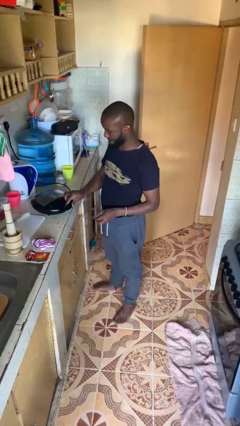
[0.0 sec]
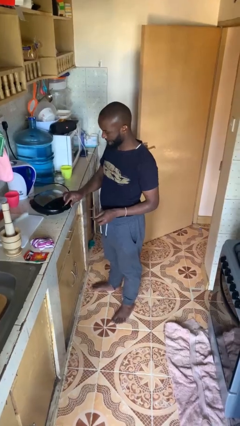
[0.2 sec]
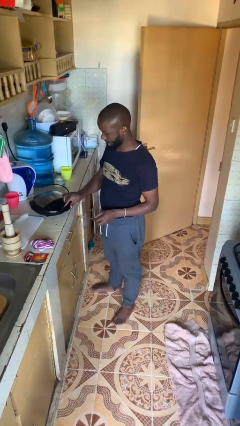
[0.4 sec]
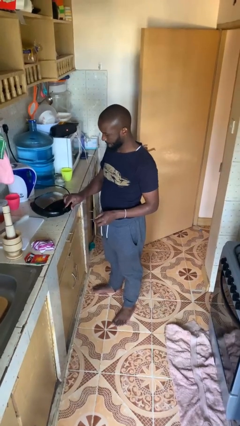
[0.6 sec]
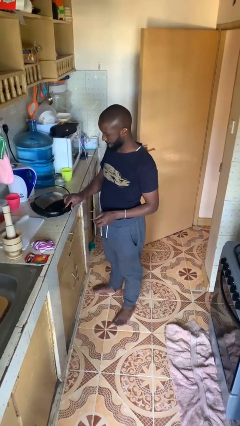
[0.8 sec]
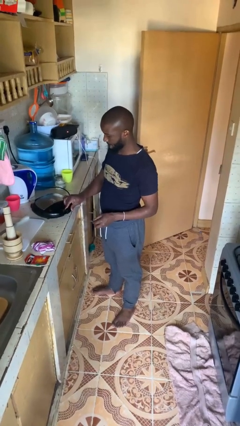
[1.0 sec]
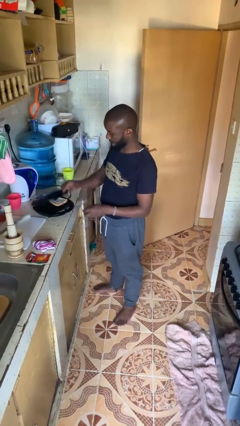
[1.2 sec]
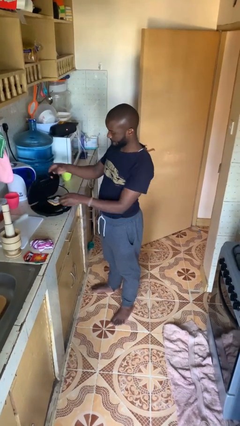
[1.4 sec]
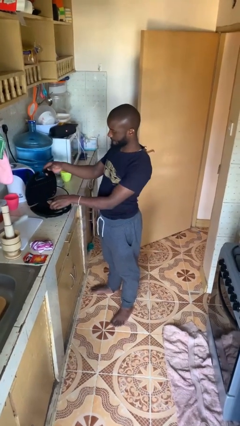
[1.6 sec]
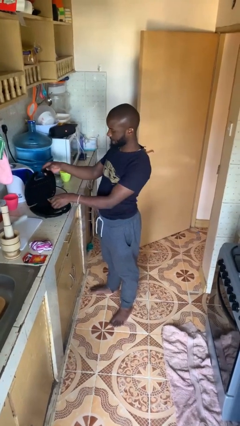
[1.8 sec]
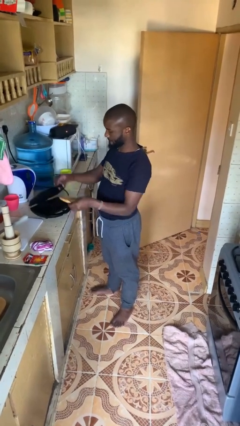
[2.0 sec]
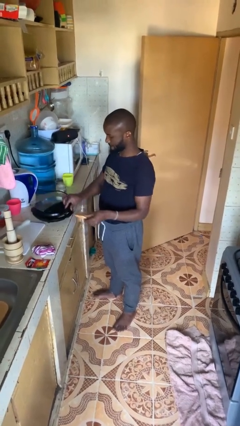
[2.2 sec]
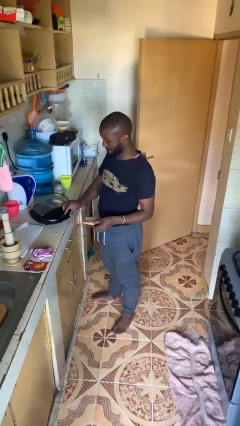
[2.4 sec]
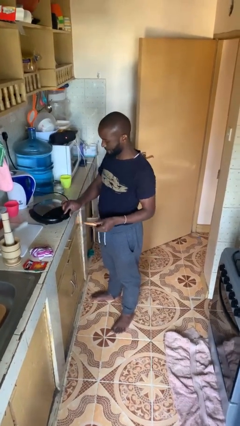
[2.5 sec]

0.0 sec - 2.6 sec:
person takes object from toaster

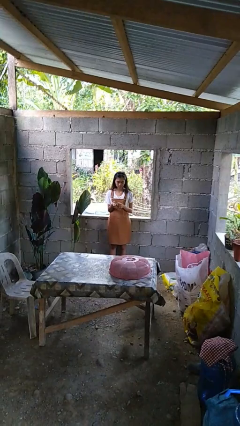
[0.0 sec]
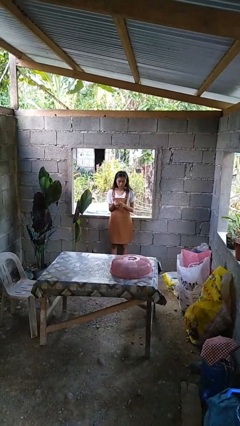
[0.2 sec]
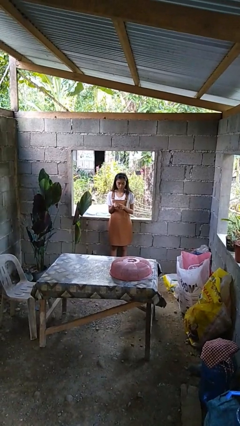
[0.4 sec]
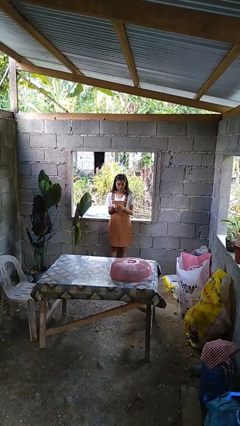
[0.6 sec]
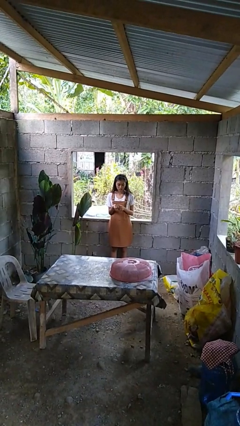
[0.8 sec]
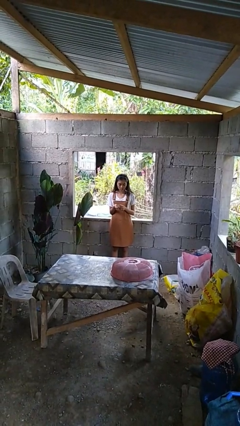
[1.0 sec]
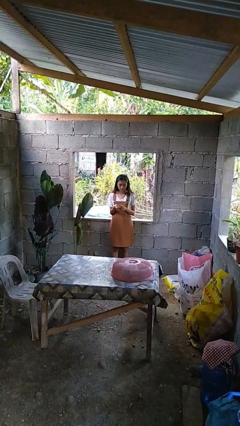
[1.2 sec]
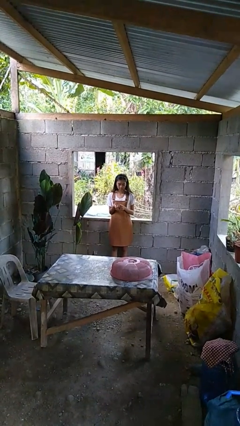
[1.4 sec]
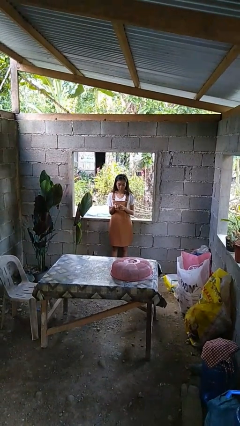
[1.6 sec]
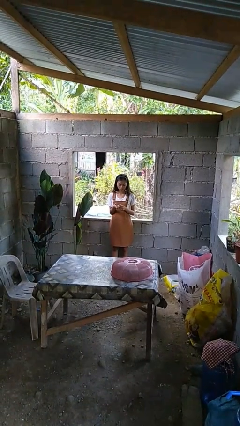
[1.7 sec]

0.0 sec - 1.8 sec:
person clips fingernails

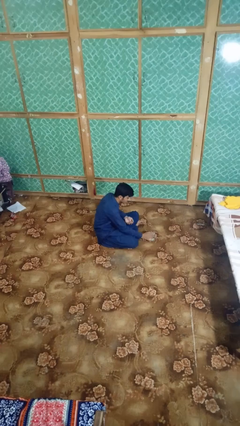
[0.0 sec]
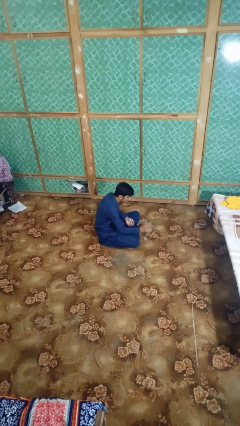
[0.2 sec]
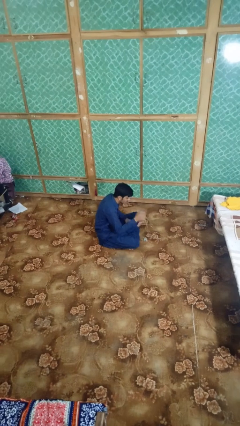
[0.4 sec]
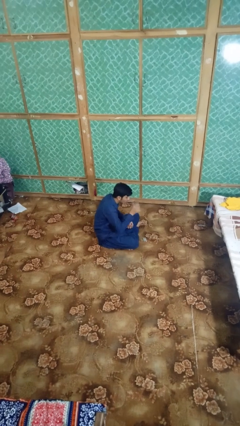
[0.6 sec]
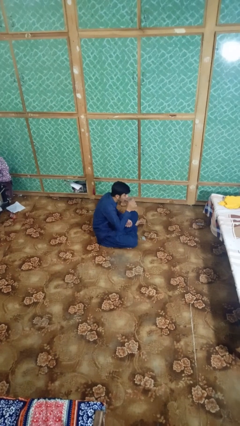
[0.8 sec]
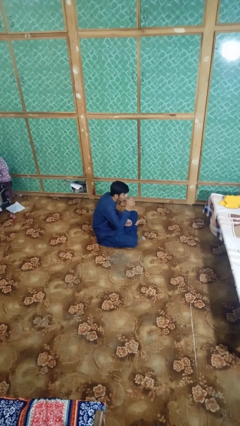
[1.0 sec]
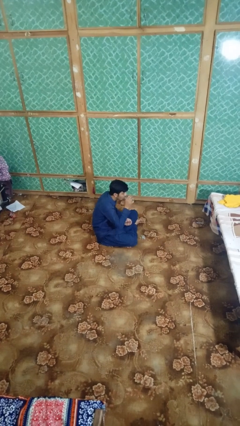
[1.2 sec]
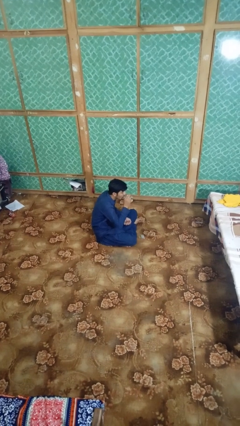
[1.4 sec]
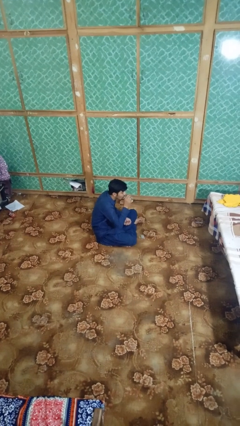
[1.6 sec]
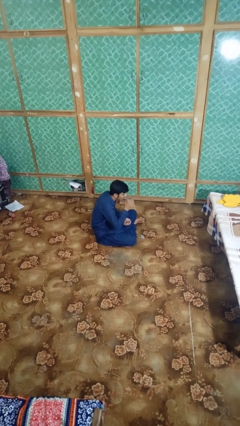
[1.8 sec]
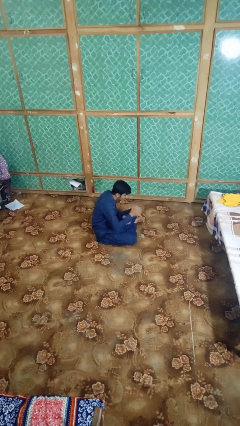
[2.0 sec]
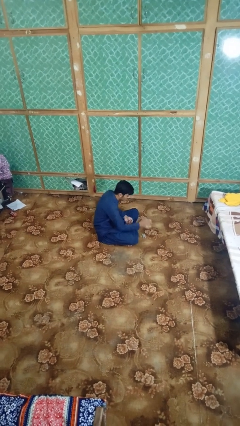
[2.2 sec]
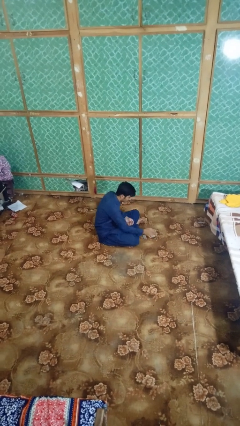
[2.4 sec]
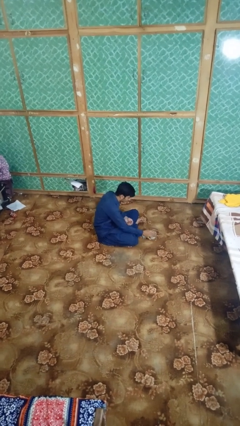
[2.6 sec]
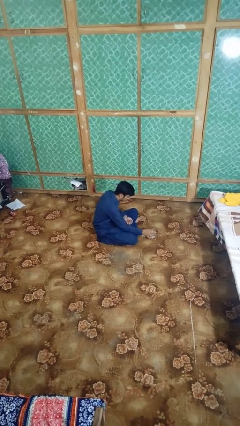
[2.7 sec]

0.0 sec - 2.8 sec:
person drinks from cup

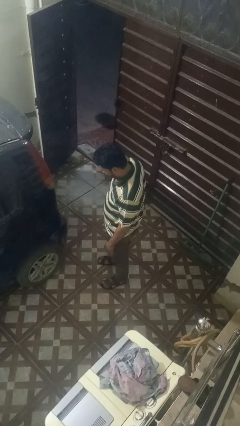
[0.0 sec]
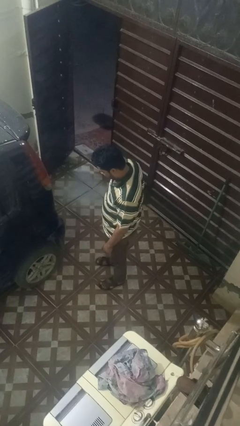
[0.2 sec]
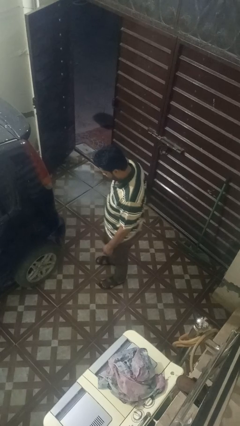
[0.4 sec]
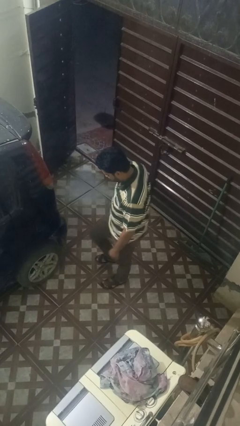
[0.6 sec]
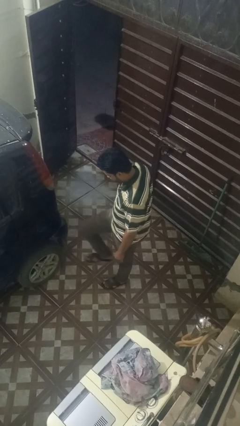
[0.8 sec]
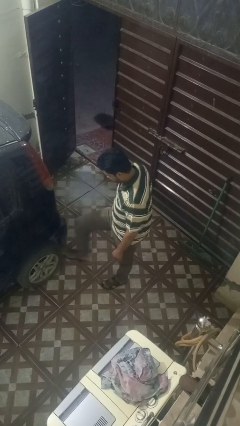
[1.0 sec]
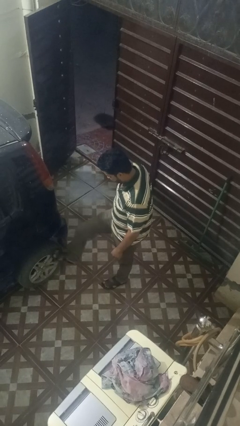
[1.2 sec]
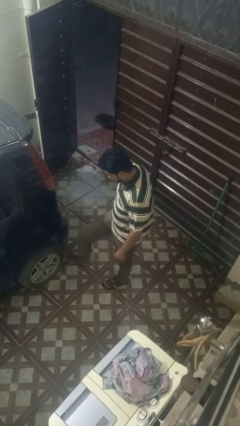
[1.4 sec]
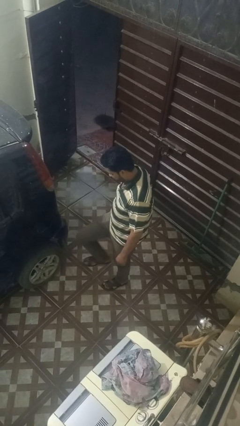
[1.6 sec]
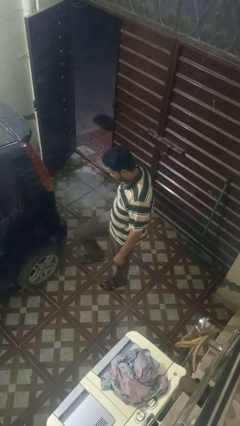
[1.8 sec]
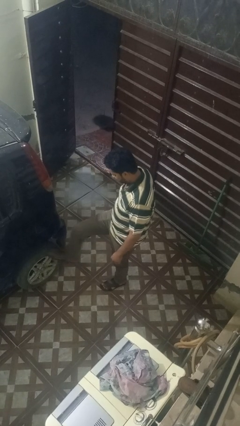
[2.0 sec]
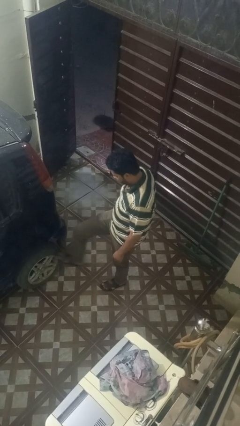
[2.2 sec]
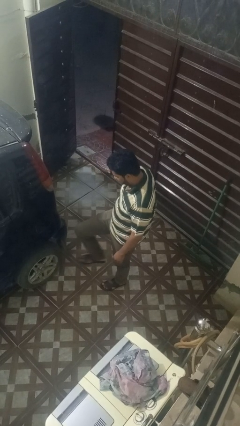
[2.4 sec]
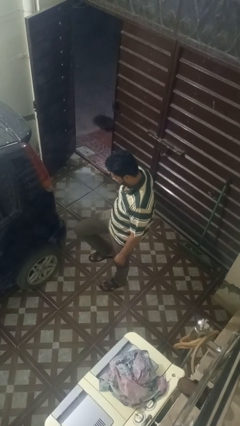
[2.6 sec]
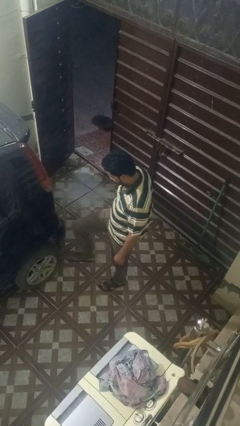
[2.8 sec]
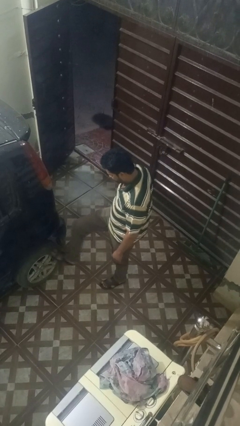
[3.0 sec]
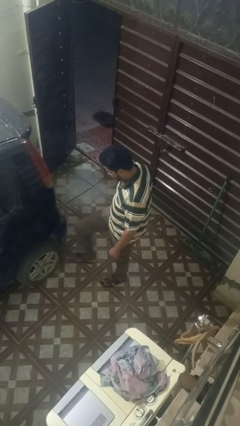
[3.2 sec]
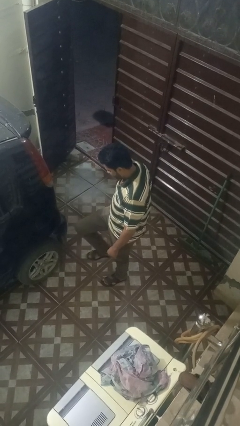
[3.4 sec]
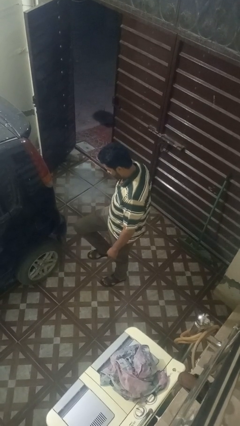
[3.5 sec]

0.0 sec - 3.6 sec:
person kicks car tires

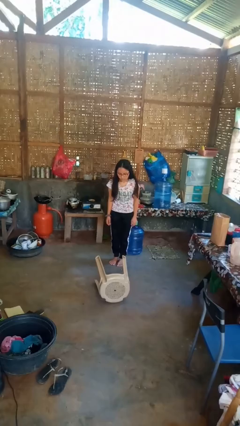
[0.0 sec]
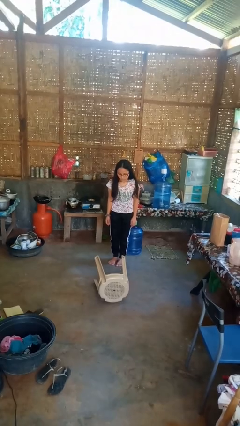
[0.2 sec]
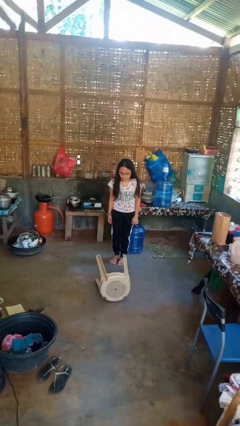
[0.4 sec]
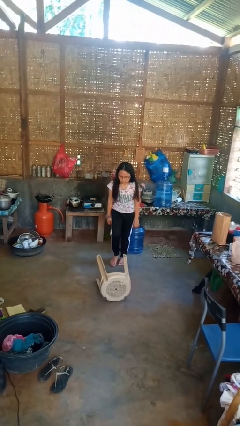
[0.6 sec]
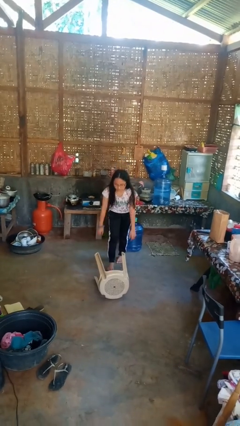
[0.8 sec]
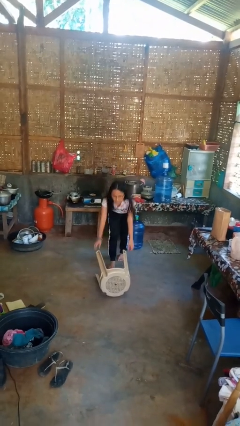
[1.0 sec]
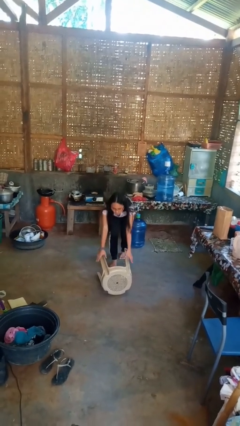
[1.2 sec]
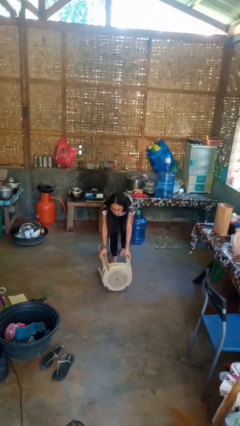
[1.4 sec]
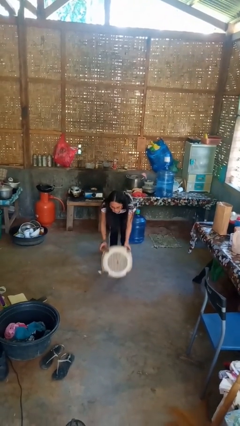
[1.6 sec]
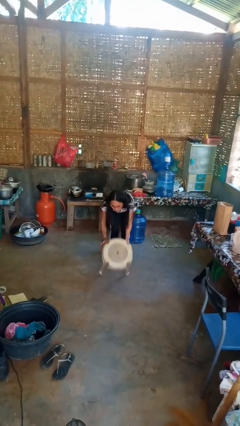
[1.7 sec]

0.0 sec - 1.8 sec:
person sets upright furniture

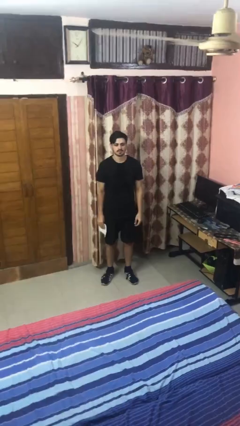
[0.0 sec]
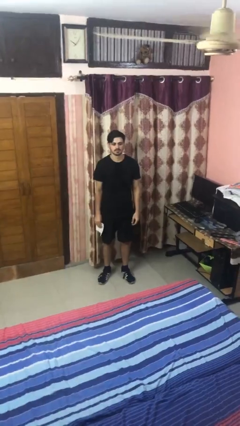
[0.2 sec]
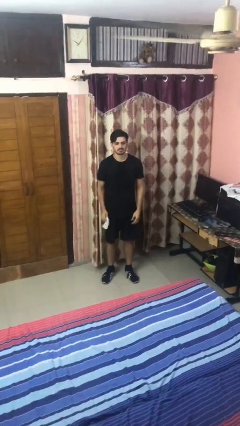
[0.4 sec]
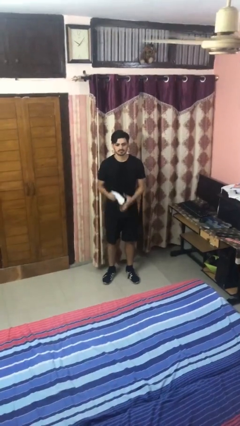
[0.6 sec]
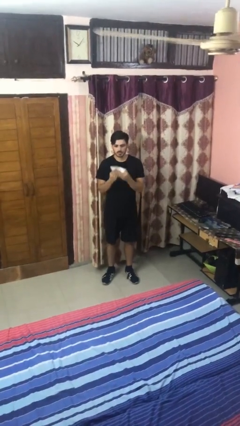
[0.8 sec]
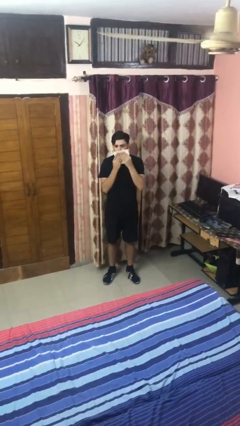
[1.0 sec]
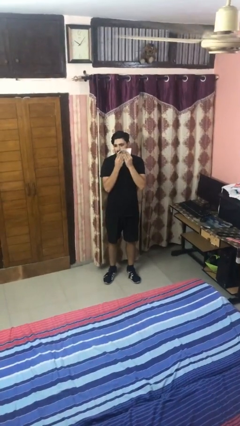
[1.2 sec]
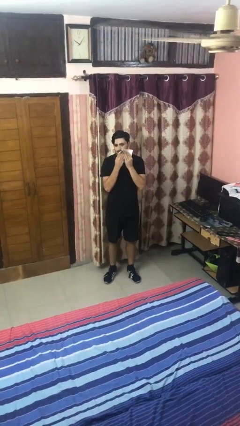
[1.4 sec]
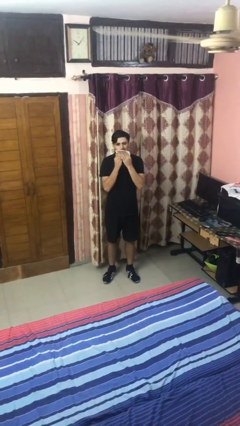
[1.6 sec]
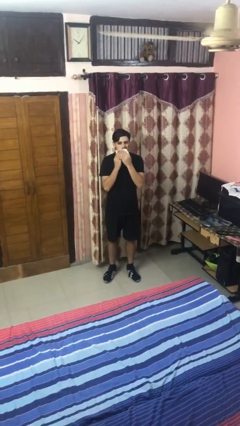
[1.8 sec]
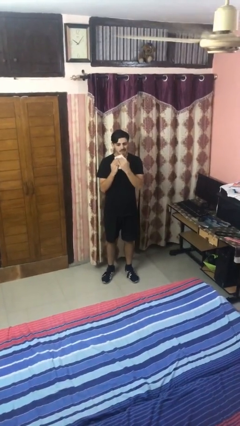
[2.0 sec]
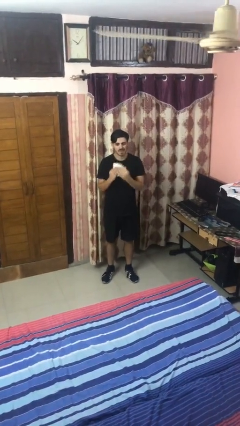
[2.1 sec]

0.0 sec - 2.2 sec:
person wipes mouth with napkin

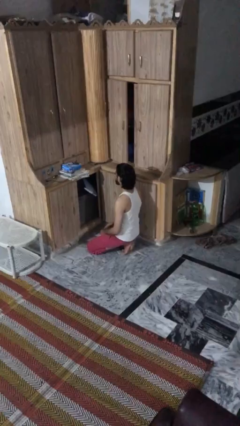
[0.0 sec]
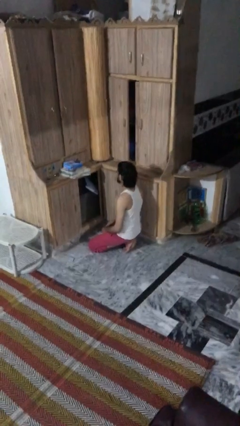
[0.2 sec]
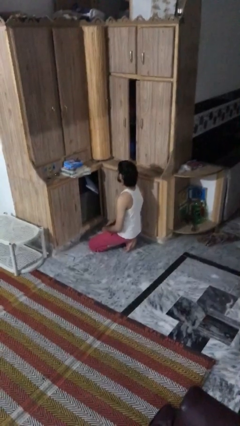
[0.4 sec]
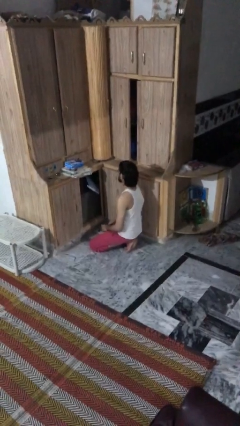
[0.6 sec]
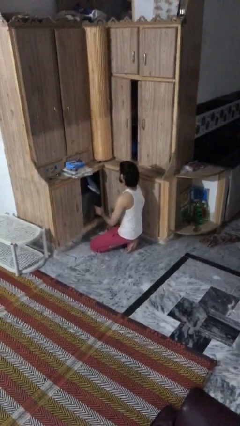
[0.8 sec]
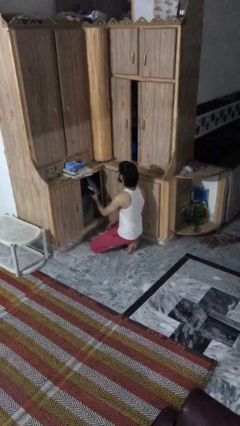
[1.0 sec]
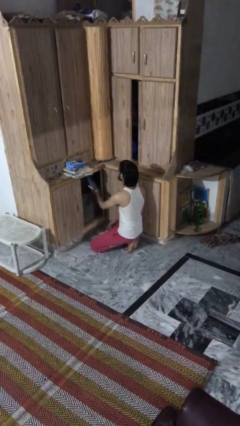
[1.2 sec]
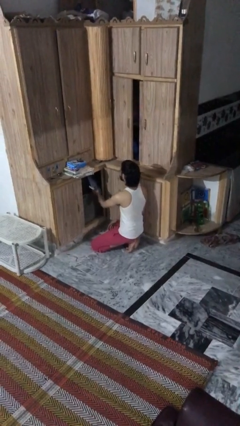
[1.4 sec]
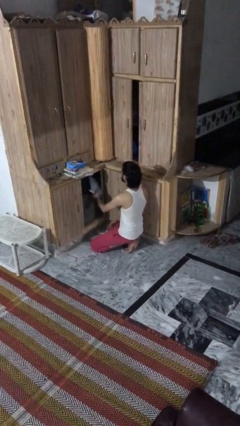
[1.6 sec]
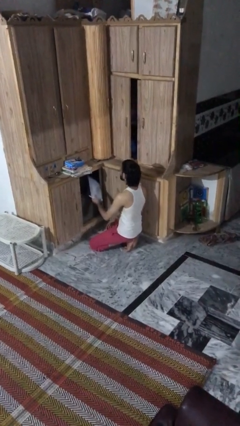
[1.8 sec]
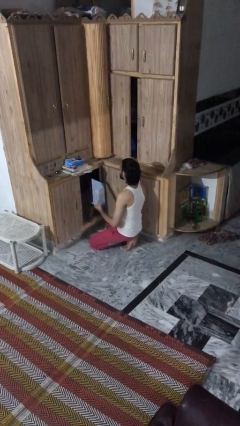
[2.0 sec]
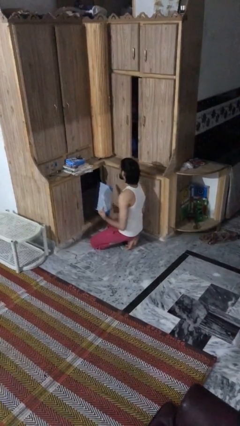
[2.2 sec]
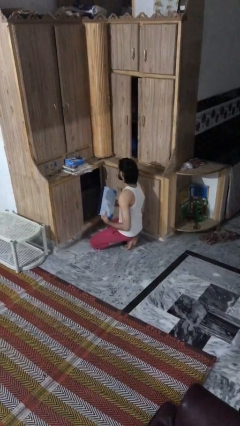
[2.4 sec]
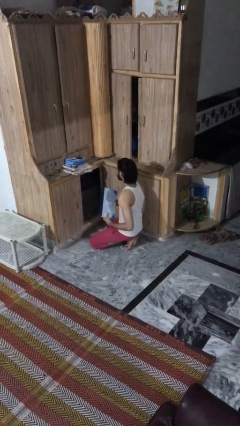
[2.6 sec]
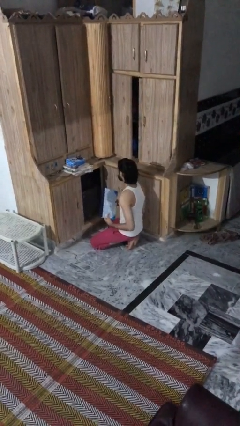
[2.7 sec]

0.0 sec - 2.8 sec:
person picks up object from cabinet
